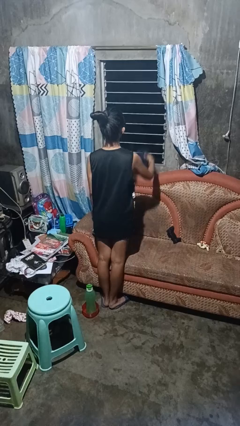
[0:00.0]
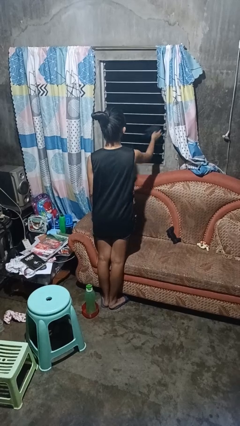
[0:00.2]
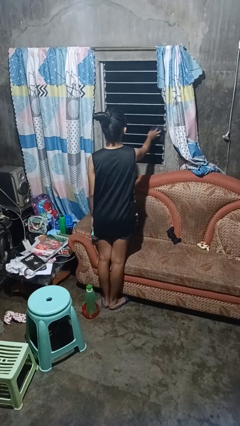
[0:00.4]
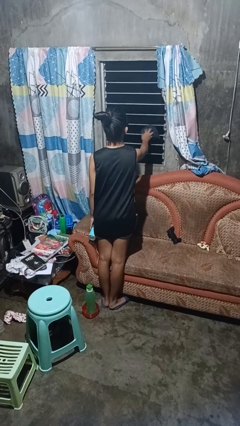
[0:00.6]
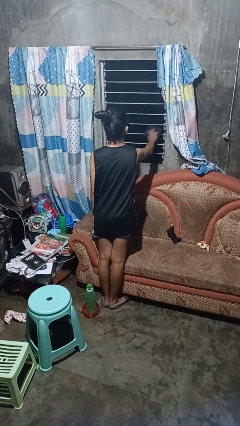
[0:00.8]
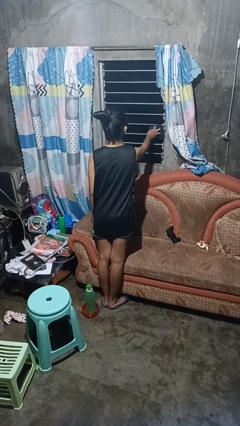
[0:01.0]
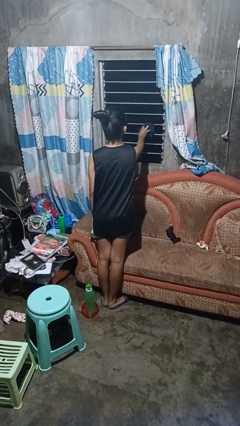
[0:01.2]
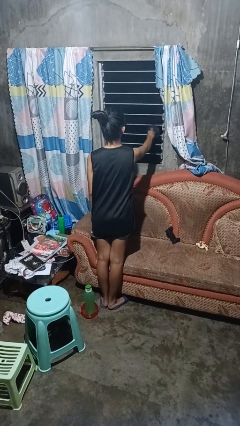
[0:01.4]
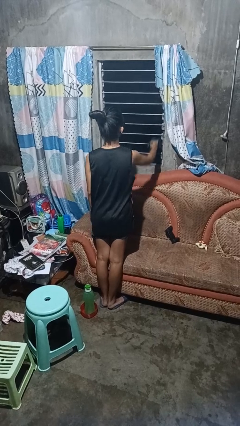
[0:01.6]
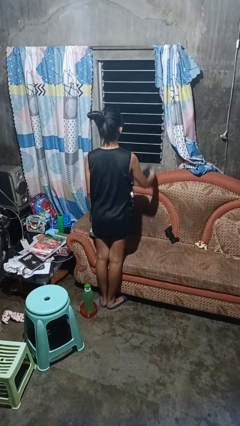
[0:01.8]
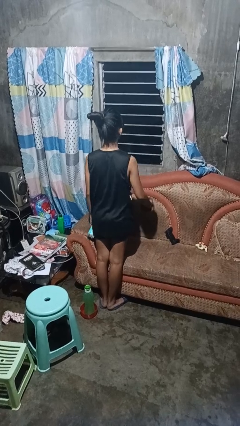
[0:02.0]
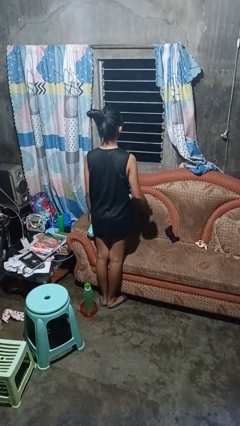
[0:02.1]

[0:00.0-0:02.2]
person washes window

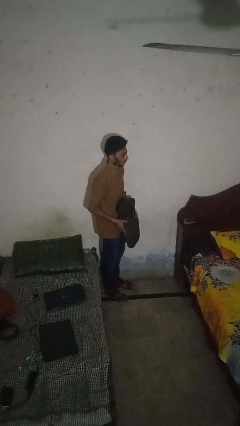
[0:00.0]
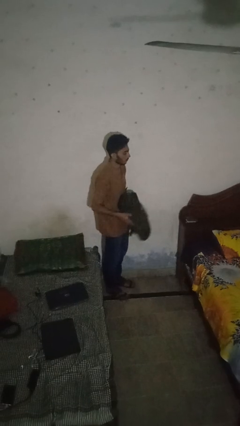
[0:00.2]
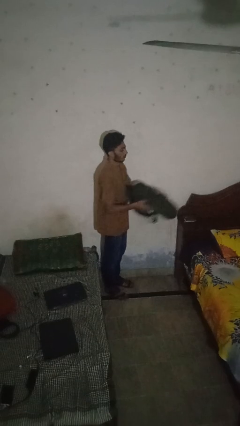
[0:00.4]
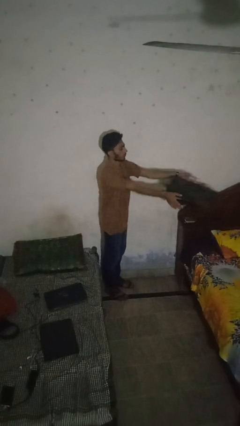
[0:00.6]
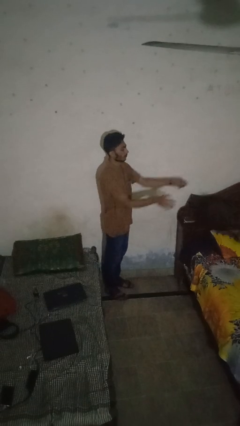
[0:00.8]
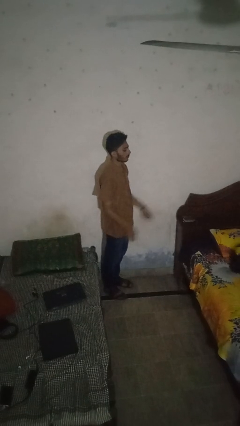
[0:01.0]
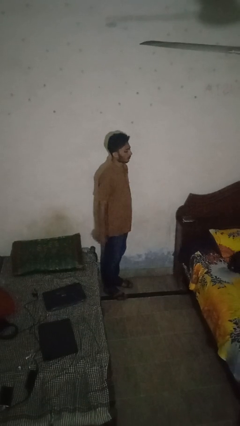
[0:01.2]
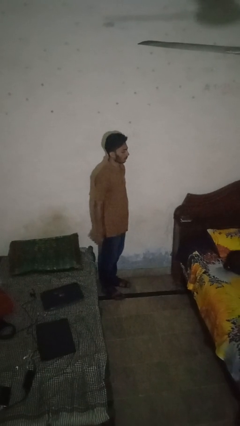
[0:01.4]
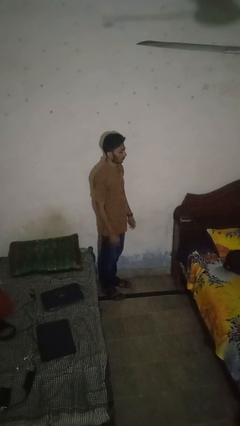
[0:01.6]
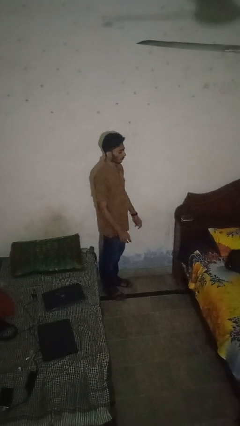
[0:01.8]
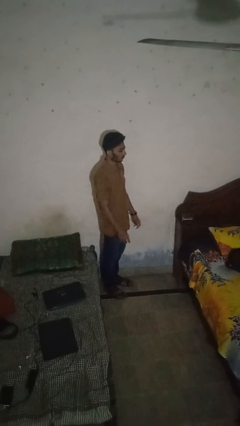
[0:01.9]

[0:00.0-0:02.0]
person throws object on bed

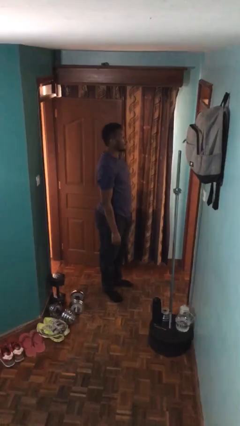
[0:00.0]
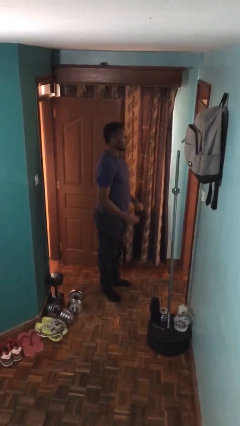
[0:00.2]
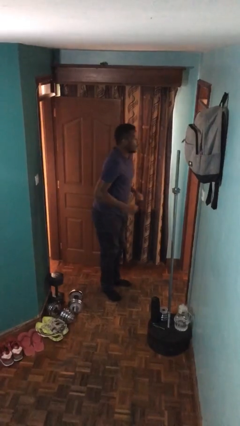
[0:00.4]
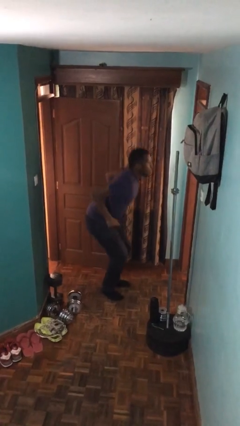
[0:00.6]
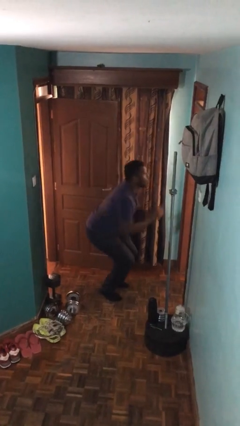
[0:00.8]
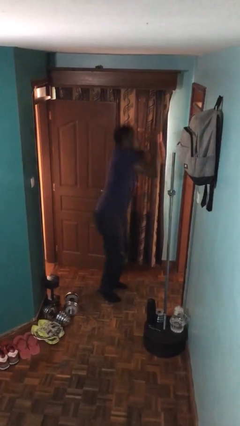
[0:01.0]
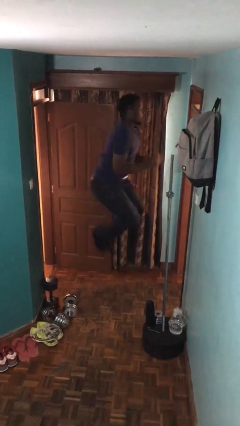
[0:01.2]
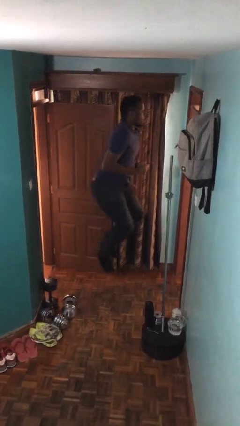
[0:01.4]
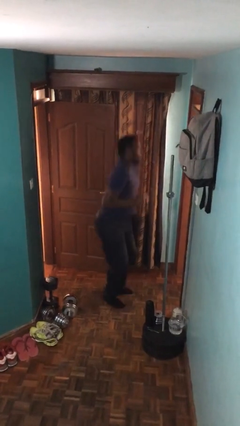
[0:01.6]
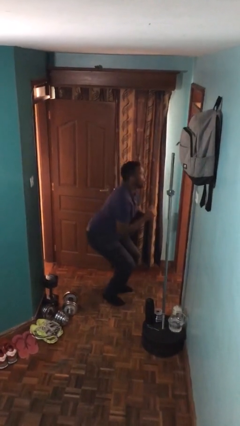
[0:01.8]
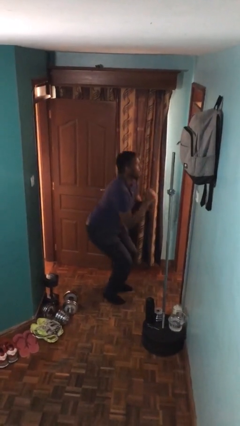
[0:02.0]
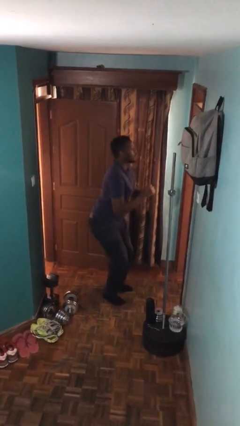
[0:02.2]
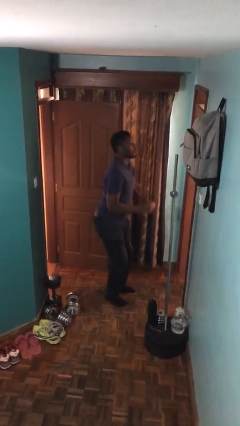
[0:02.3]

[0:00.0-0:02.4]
person jumps

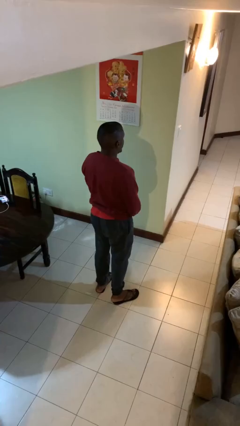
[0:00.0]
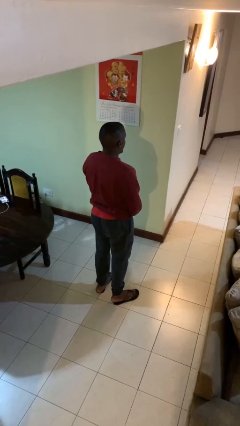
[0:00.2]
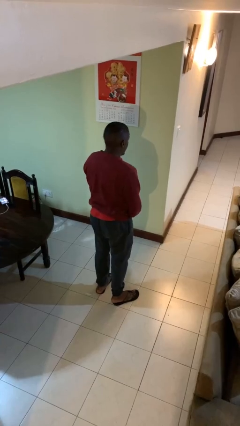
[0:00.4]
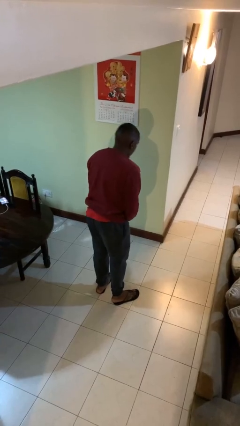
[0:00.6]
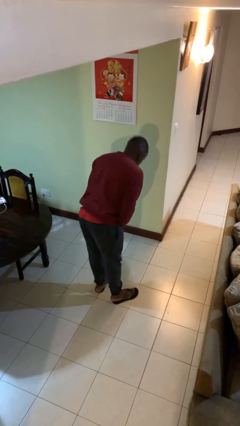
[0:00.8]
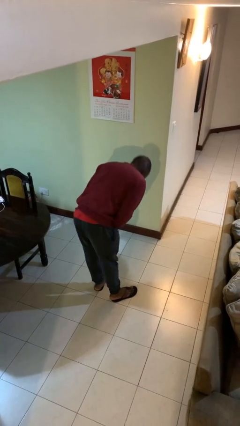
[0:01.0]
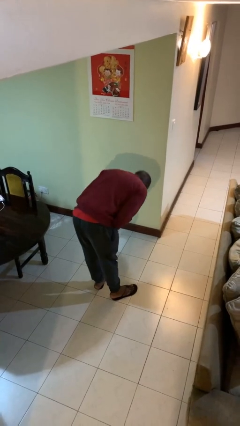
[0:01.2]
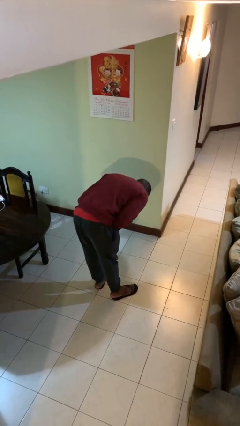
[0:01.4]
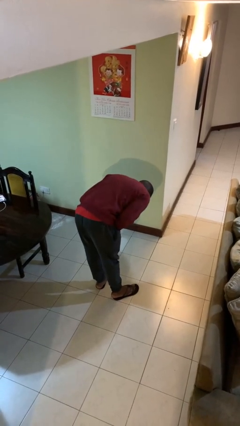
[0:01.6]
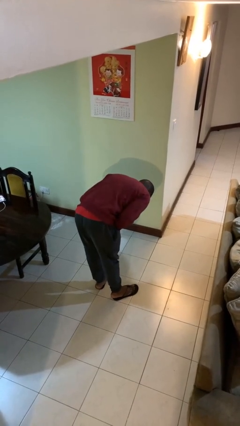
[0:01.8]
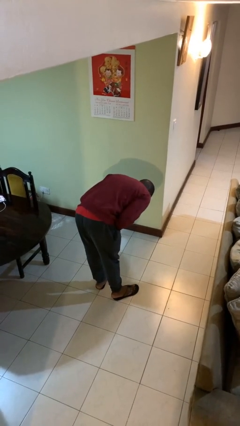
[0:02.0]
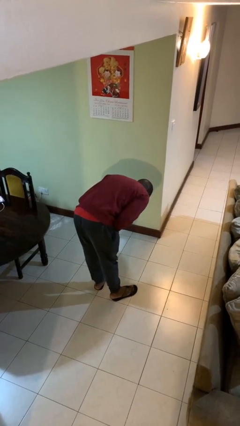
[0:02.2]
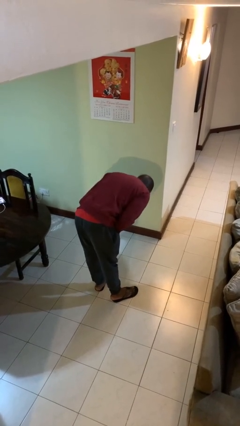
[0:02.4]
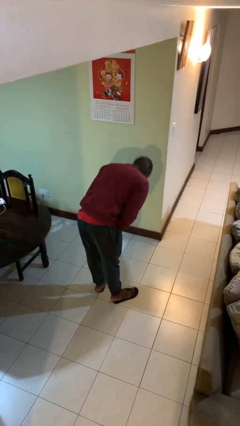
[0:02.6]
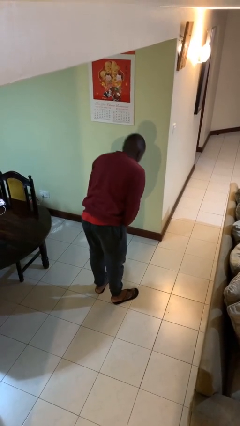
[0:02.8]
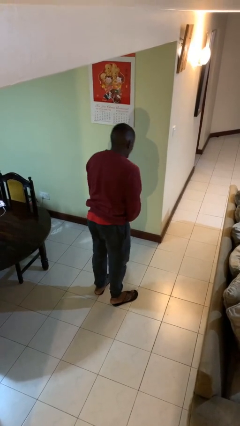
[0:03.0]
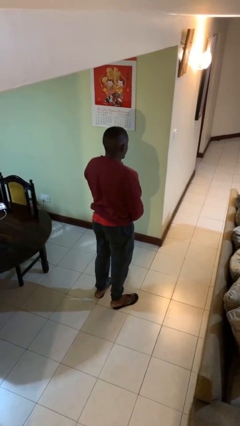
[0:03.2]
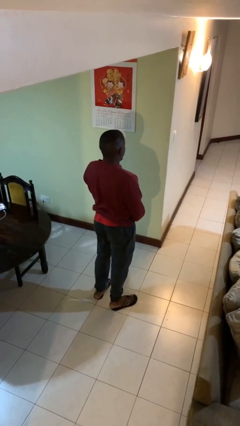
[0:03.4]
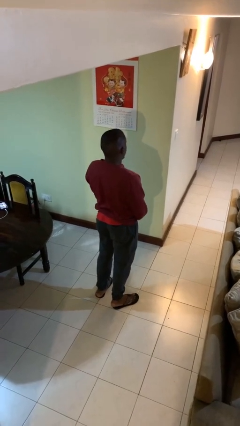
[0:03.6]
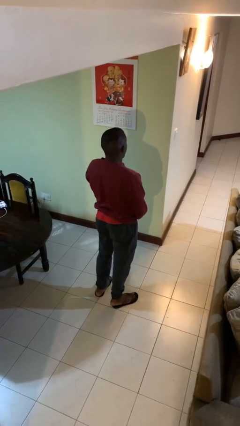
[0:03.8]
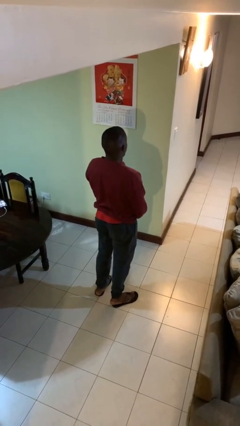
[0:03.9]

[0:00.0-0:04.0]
person bows

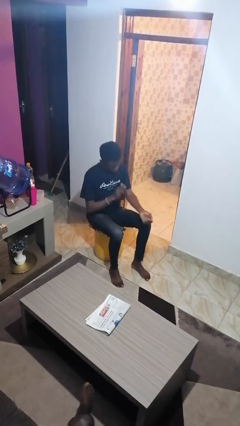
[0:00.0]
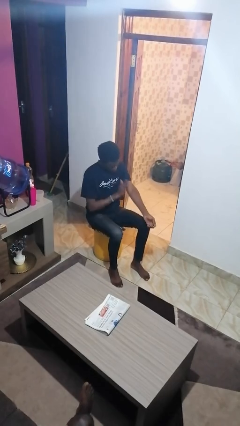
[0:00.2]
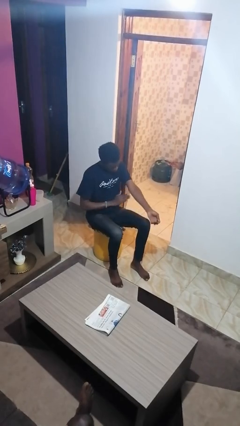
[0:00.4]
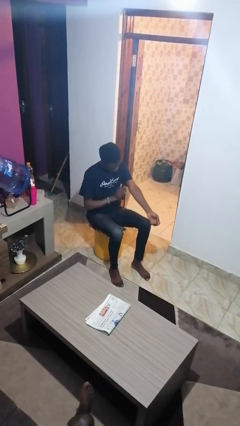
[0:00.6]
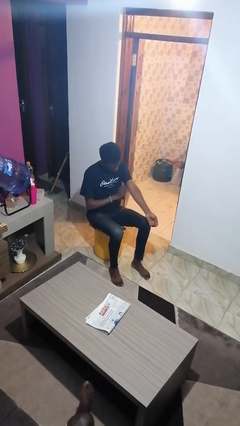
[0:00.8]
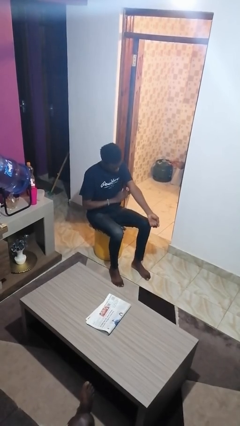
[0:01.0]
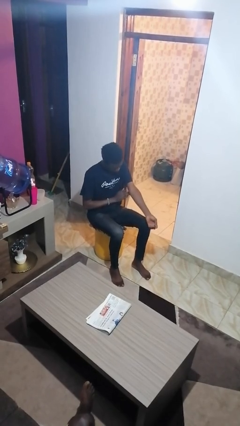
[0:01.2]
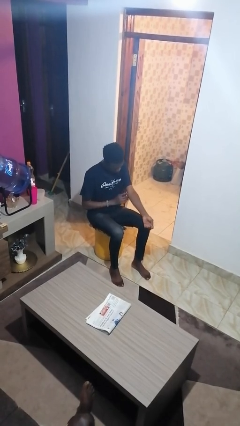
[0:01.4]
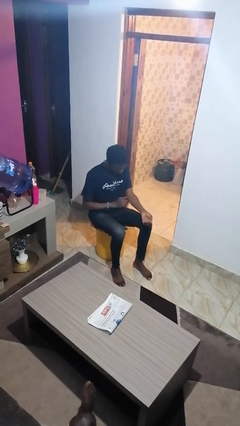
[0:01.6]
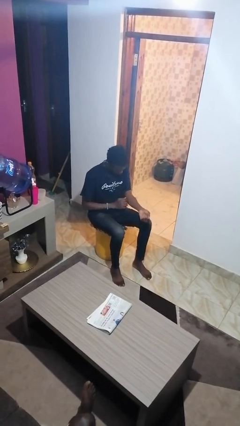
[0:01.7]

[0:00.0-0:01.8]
person swats bug

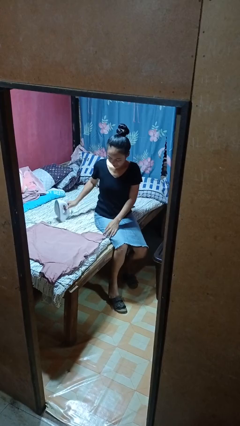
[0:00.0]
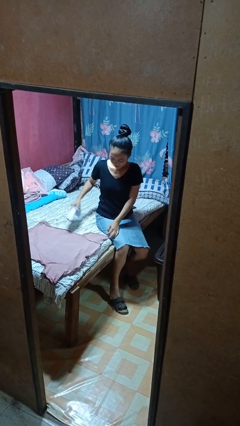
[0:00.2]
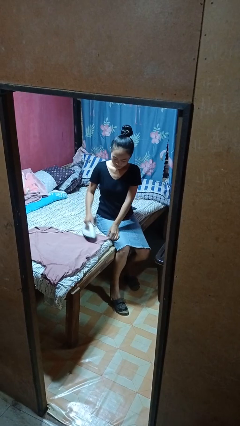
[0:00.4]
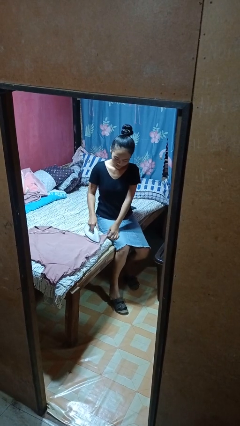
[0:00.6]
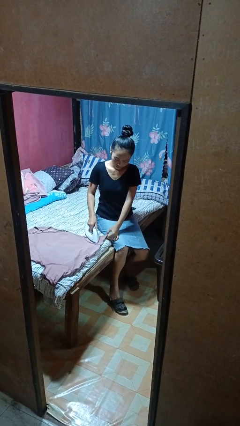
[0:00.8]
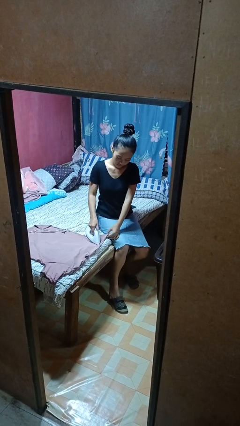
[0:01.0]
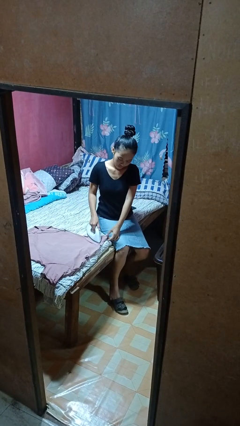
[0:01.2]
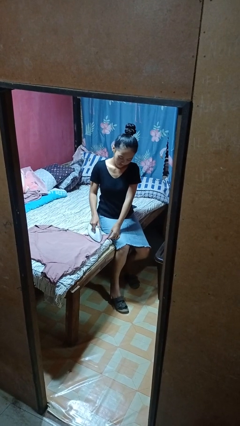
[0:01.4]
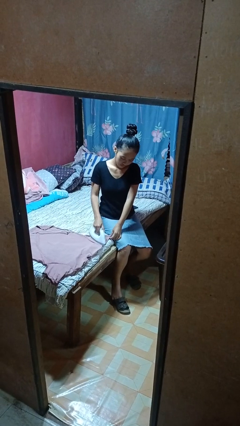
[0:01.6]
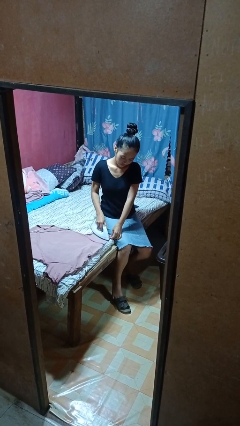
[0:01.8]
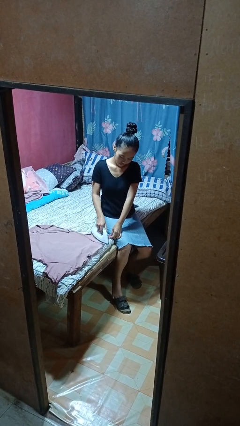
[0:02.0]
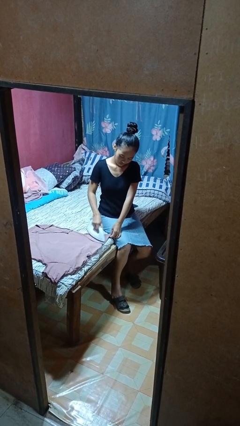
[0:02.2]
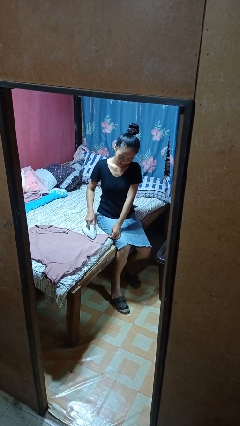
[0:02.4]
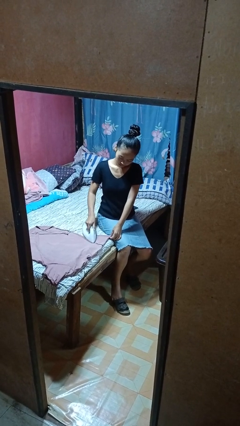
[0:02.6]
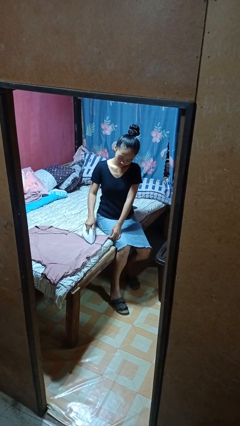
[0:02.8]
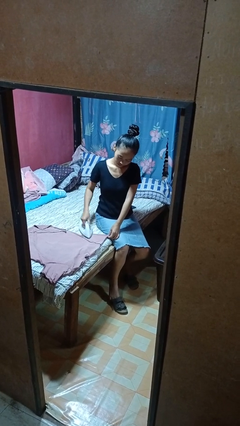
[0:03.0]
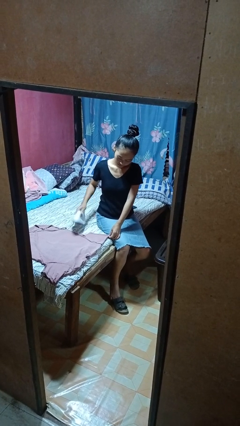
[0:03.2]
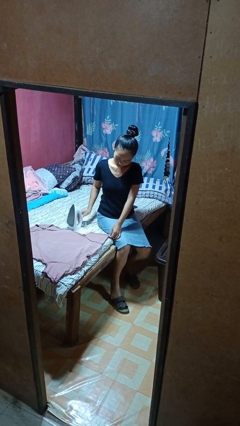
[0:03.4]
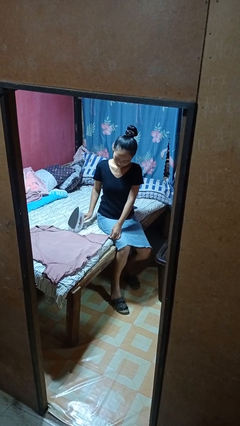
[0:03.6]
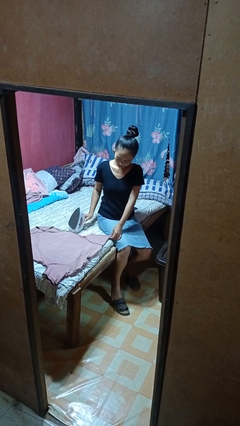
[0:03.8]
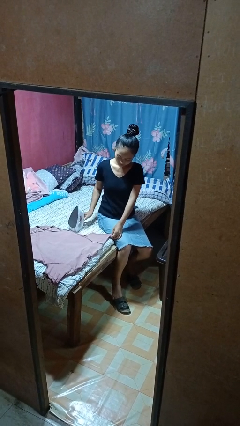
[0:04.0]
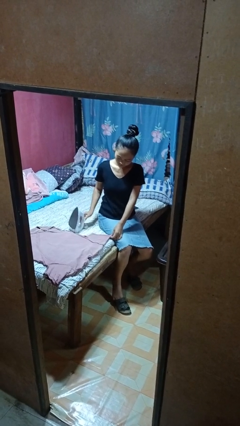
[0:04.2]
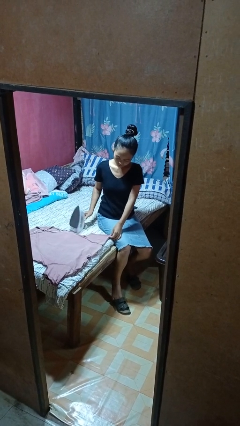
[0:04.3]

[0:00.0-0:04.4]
person irons clothes

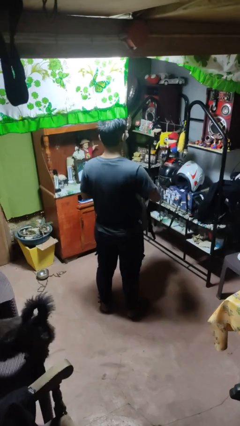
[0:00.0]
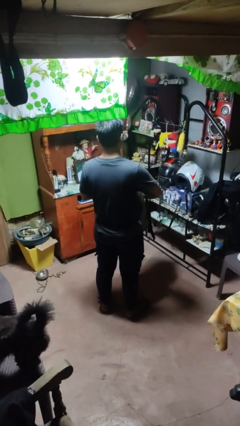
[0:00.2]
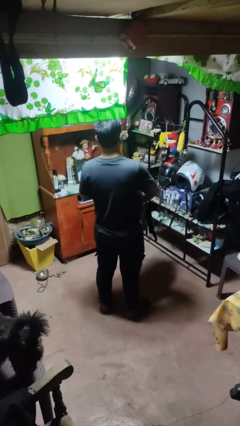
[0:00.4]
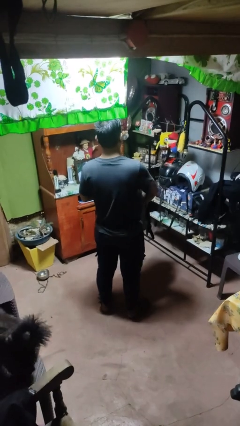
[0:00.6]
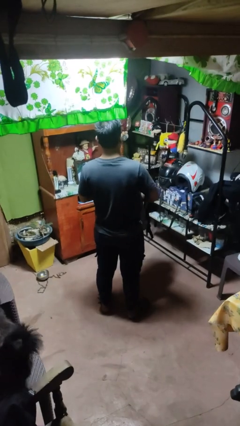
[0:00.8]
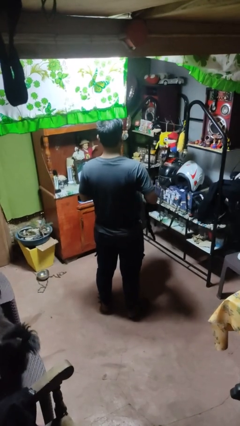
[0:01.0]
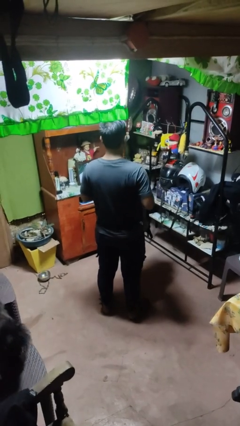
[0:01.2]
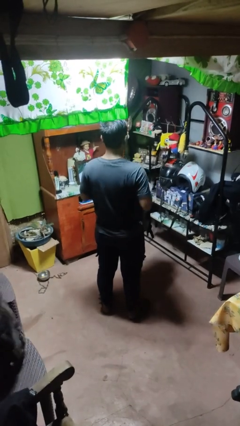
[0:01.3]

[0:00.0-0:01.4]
person puts object into bag
